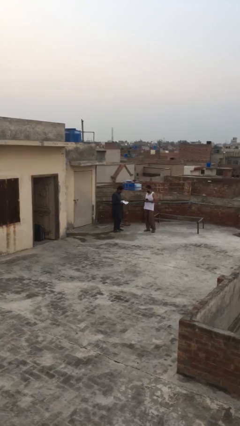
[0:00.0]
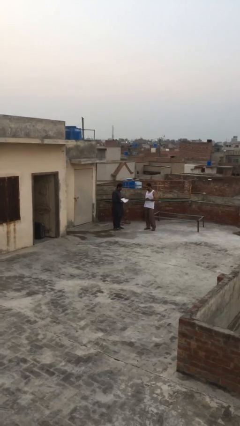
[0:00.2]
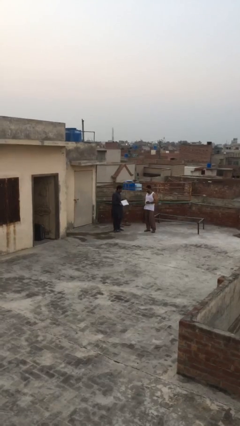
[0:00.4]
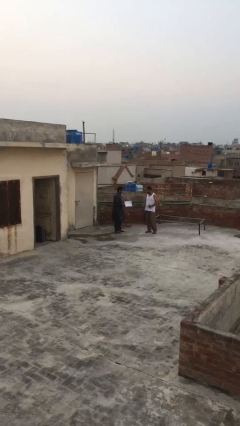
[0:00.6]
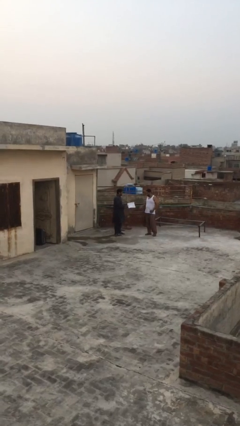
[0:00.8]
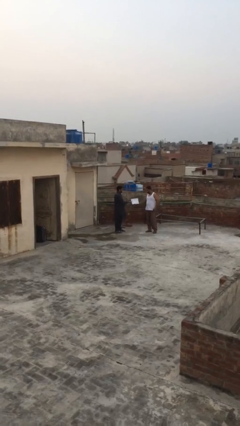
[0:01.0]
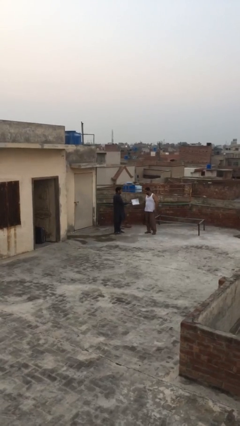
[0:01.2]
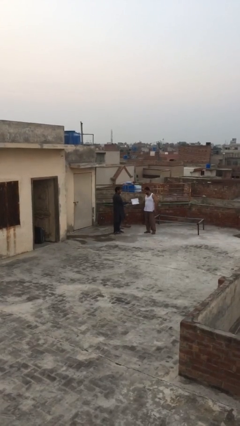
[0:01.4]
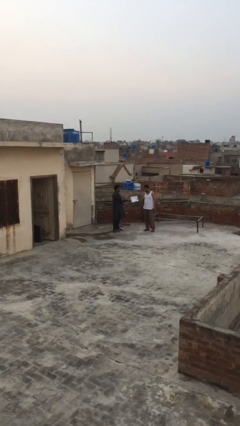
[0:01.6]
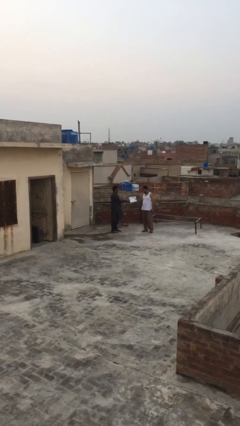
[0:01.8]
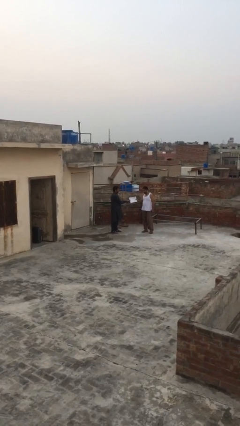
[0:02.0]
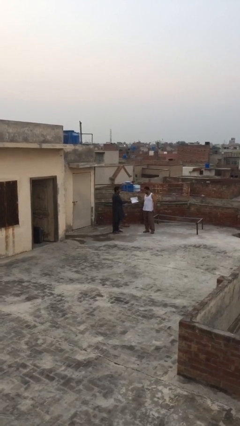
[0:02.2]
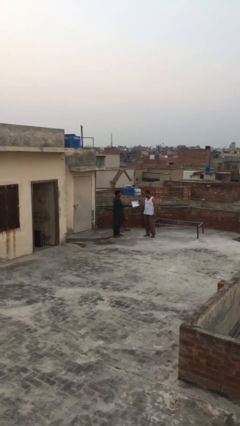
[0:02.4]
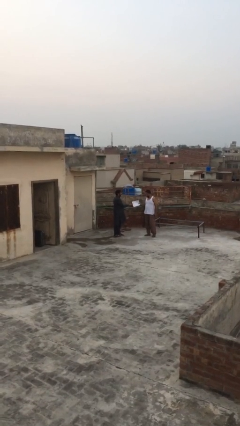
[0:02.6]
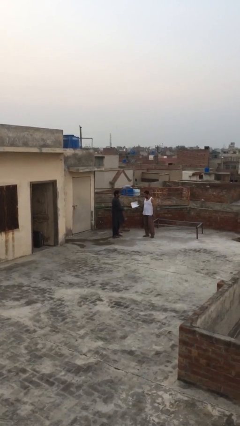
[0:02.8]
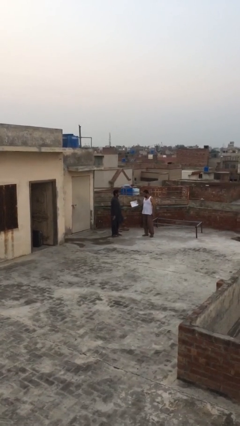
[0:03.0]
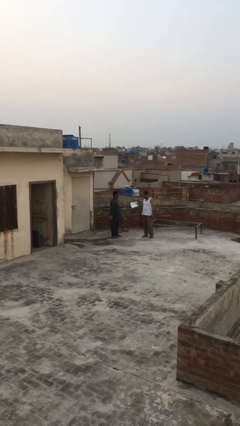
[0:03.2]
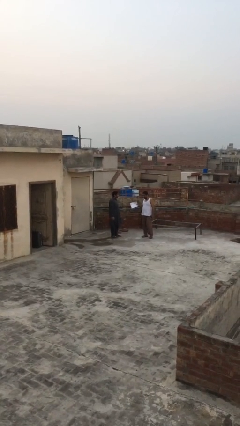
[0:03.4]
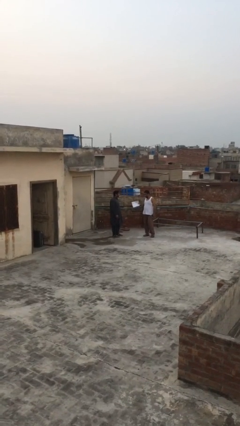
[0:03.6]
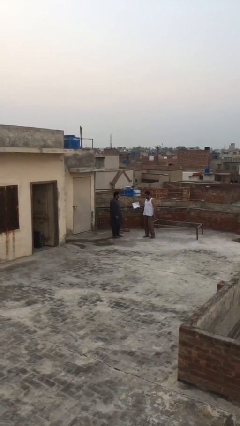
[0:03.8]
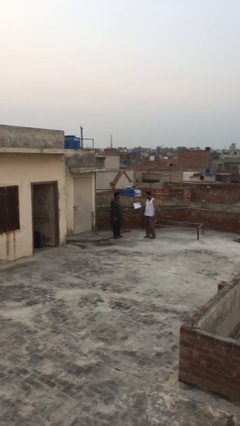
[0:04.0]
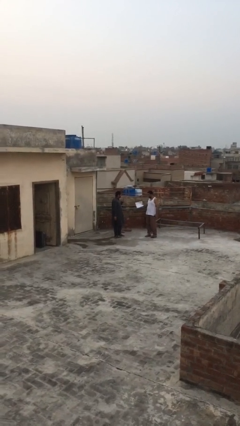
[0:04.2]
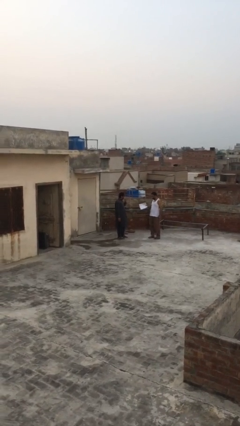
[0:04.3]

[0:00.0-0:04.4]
person transfers object to person

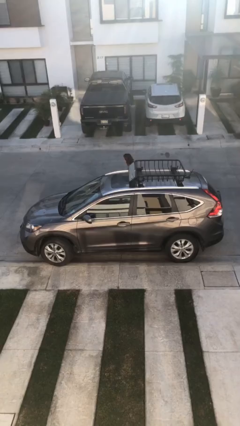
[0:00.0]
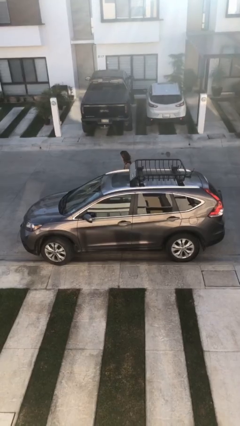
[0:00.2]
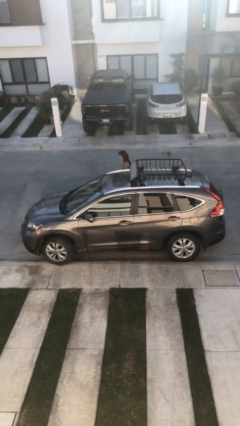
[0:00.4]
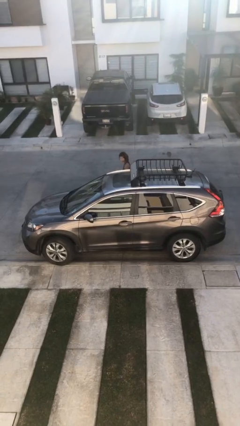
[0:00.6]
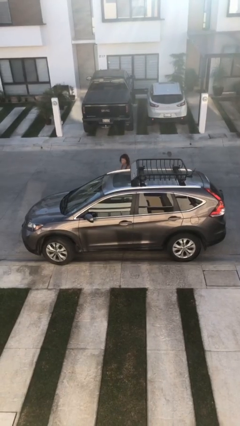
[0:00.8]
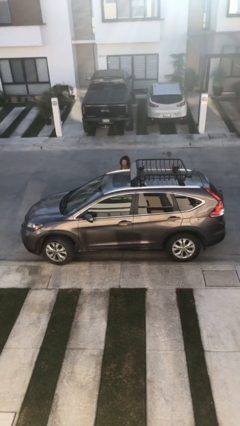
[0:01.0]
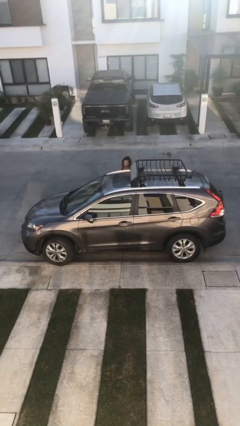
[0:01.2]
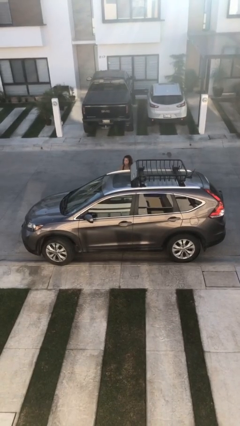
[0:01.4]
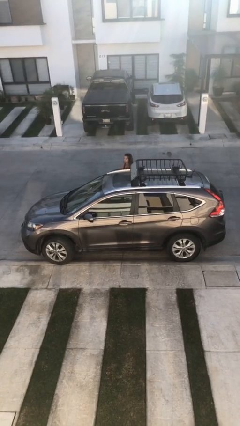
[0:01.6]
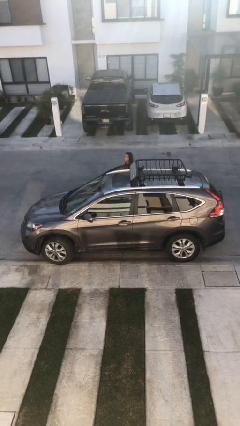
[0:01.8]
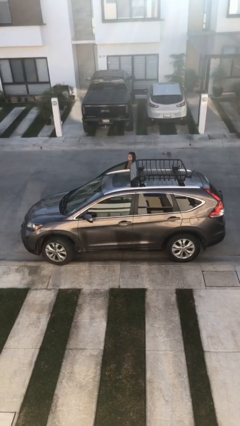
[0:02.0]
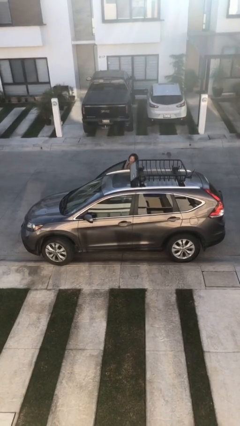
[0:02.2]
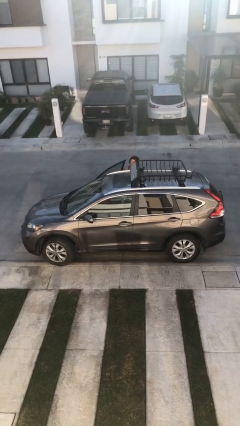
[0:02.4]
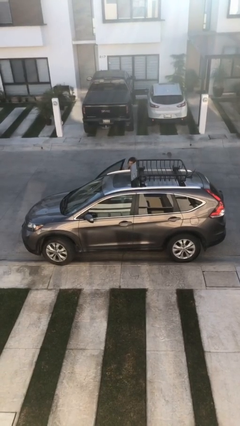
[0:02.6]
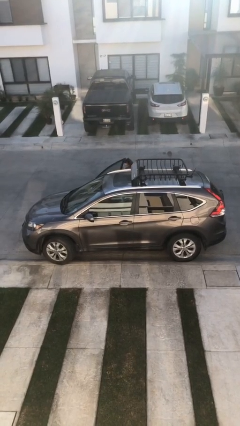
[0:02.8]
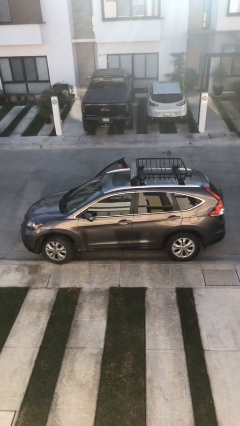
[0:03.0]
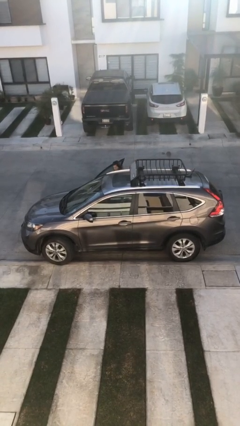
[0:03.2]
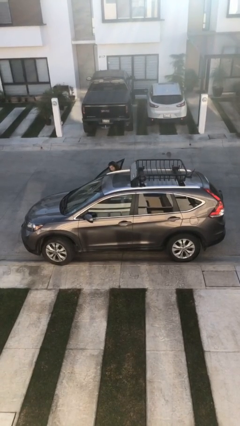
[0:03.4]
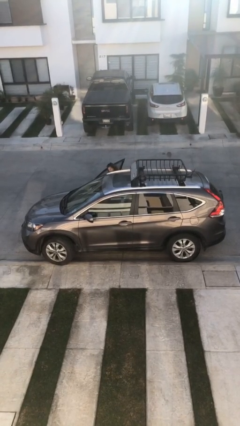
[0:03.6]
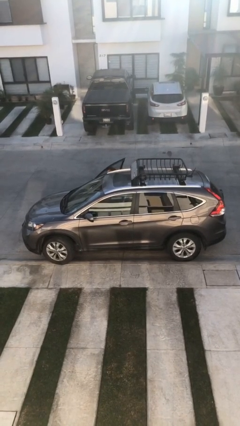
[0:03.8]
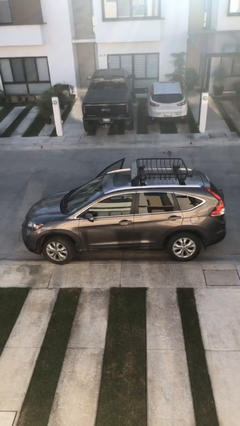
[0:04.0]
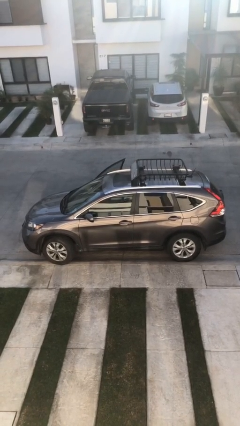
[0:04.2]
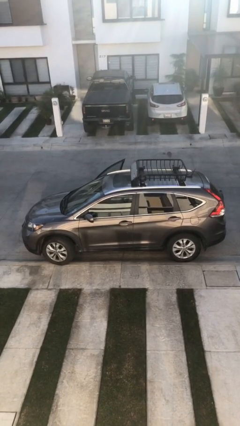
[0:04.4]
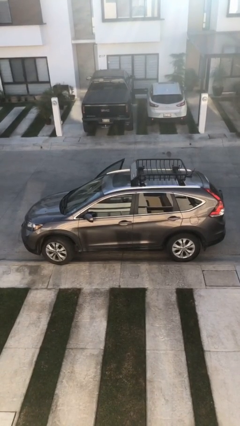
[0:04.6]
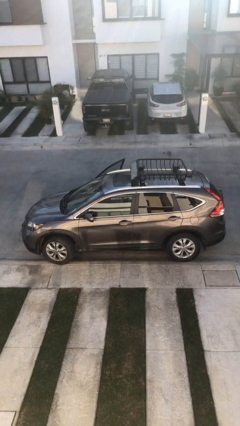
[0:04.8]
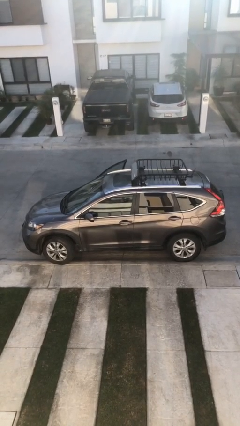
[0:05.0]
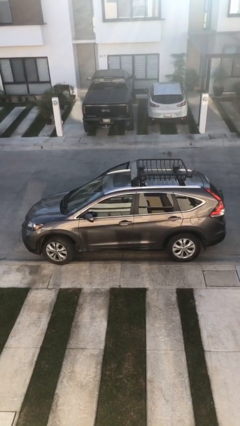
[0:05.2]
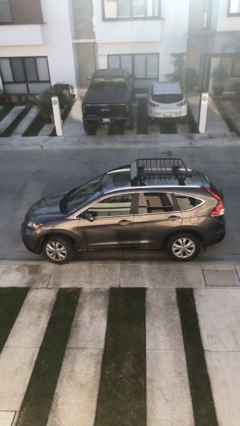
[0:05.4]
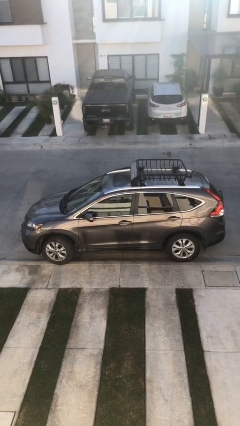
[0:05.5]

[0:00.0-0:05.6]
car picks up person

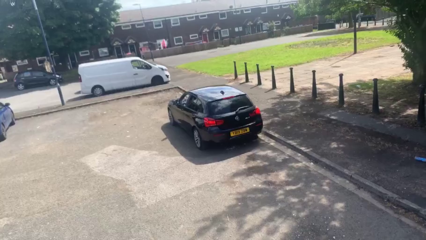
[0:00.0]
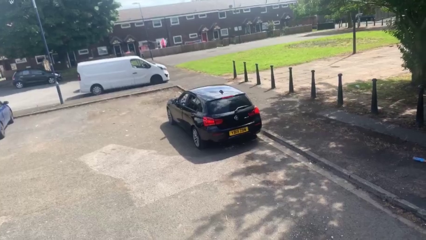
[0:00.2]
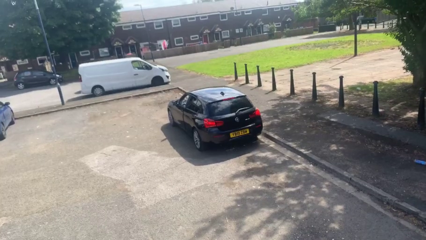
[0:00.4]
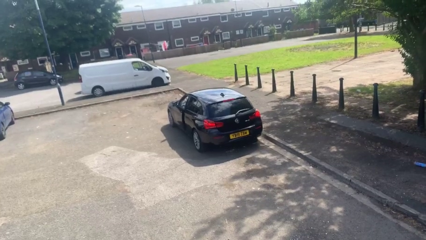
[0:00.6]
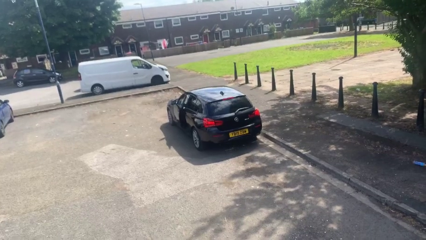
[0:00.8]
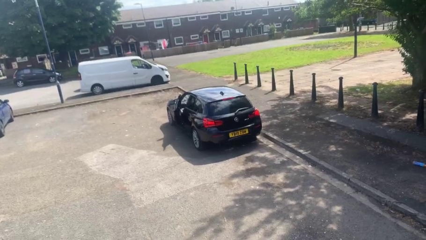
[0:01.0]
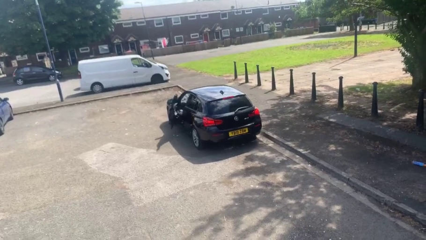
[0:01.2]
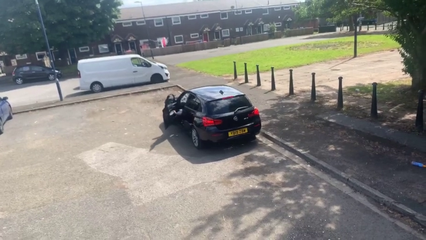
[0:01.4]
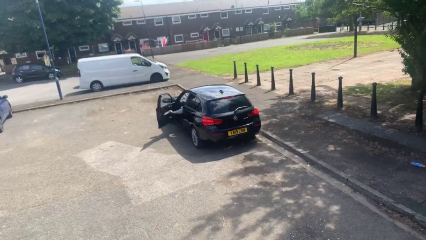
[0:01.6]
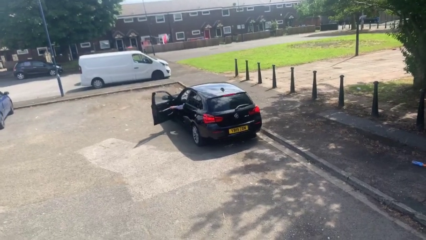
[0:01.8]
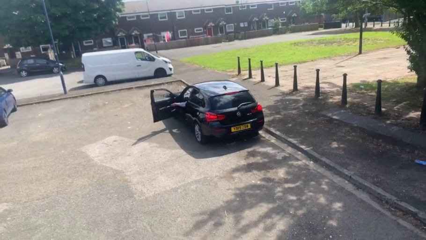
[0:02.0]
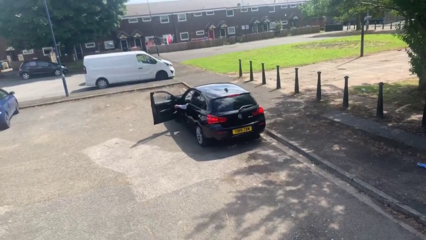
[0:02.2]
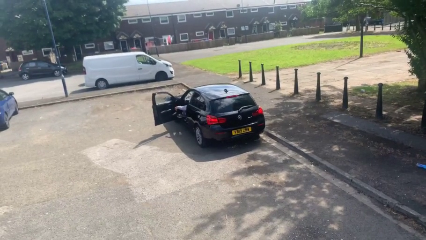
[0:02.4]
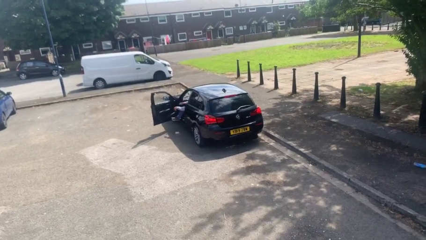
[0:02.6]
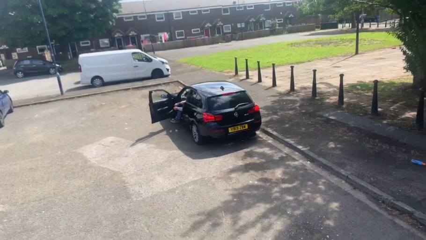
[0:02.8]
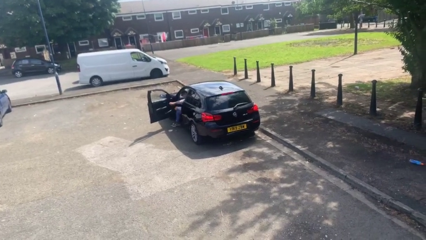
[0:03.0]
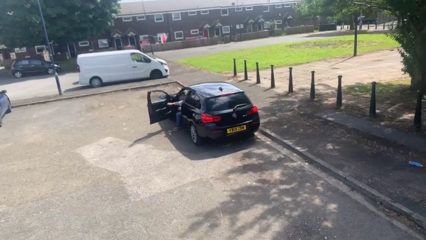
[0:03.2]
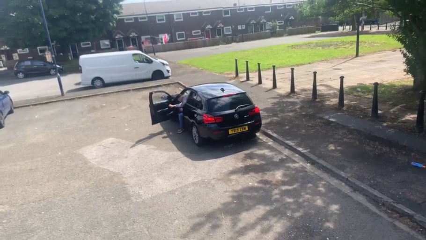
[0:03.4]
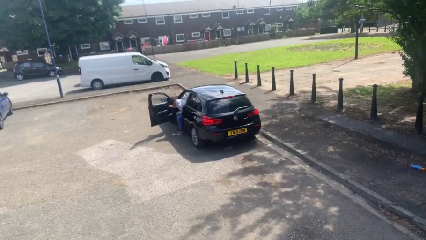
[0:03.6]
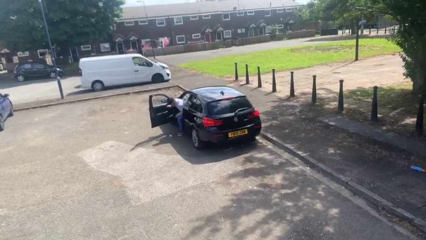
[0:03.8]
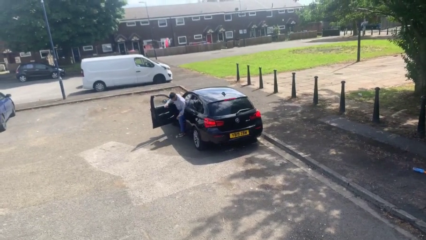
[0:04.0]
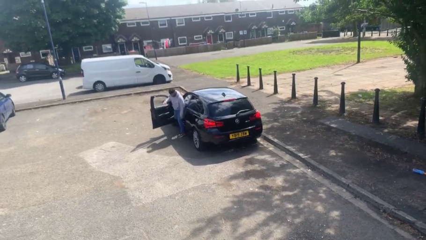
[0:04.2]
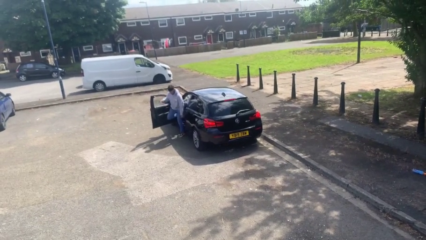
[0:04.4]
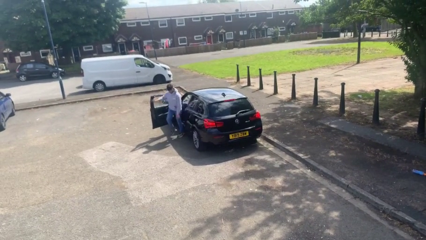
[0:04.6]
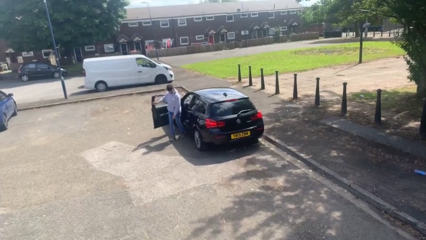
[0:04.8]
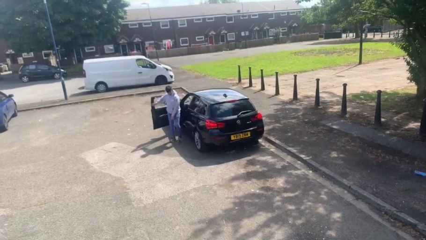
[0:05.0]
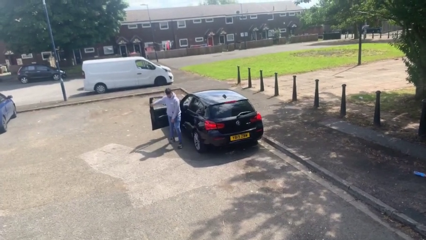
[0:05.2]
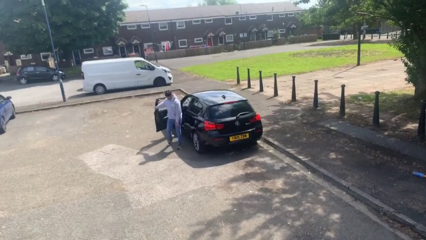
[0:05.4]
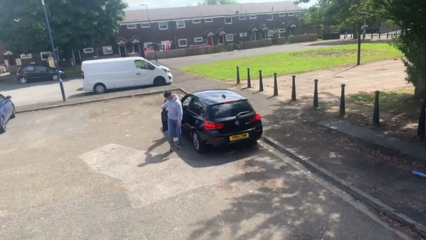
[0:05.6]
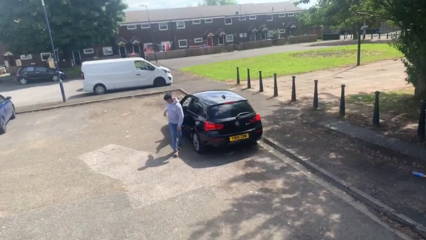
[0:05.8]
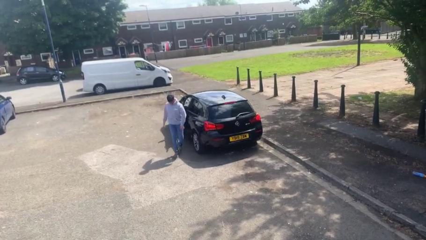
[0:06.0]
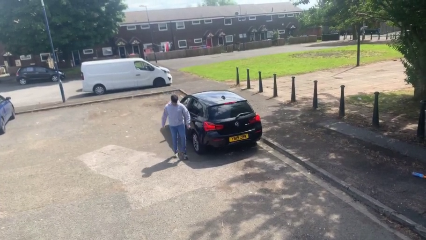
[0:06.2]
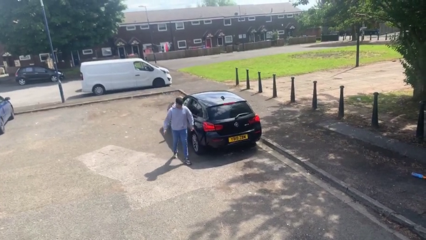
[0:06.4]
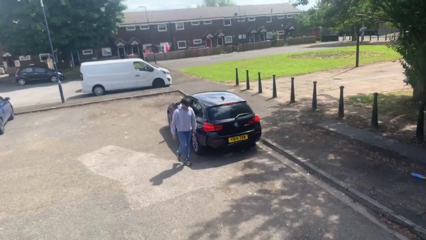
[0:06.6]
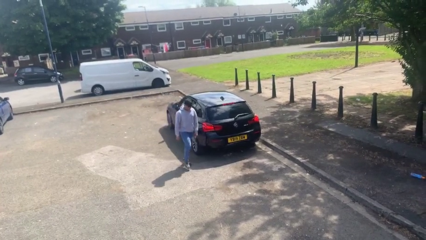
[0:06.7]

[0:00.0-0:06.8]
car drops off person

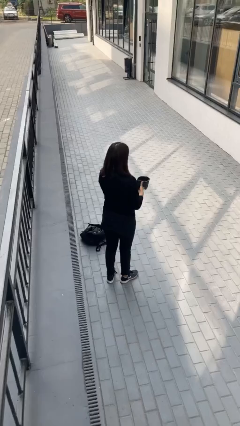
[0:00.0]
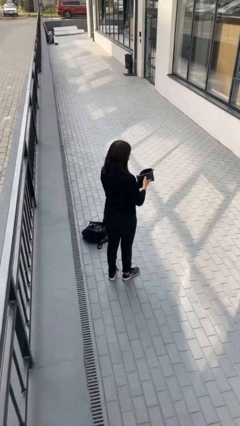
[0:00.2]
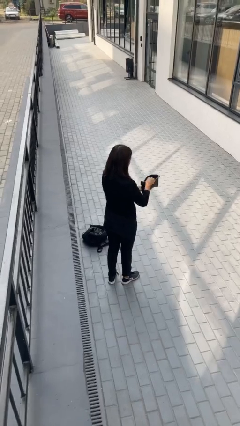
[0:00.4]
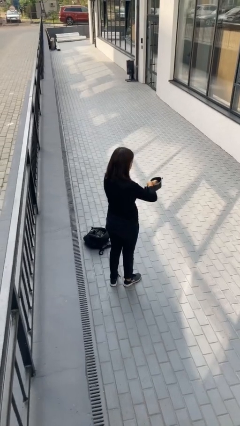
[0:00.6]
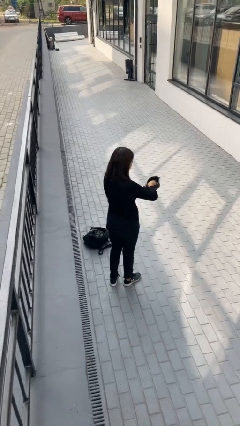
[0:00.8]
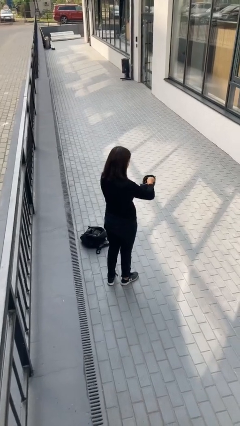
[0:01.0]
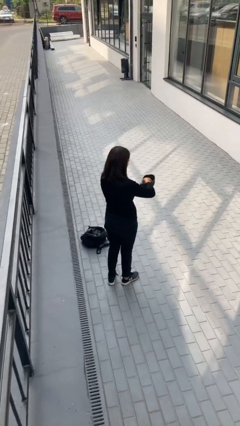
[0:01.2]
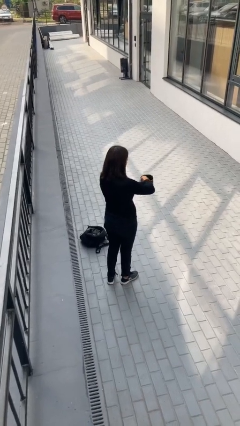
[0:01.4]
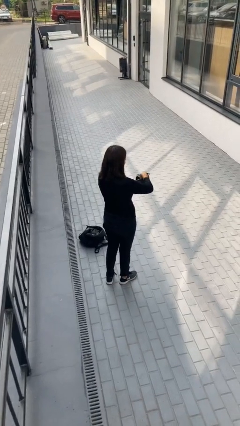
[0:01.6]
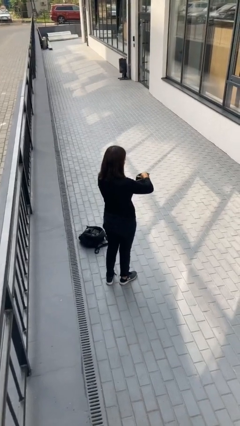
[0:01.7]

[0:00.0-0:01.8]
person searches in purse
